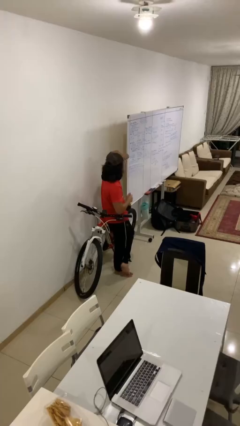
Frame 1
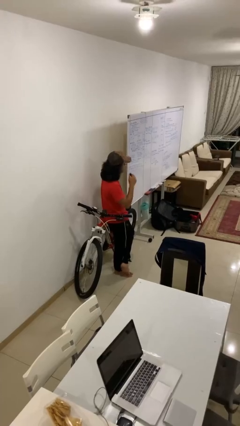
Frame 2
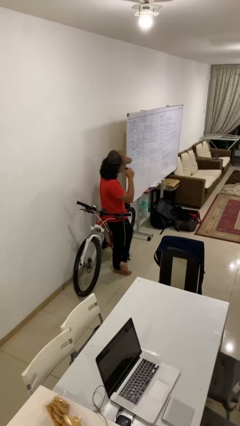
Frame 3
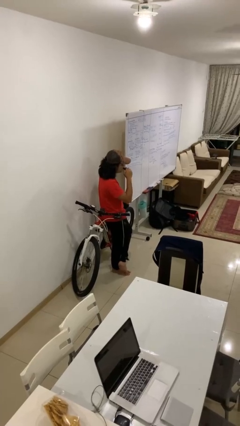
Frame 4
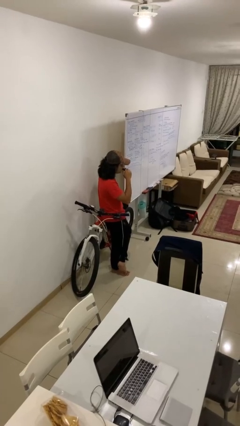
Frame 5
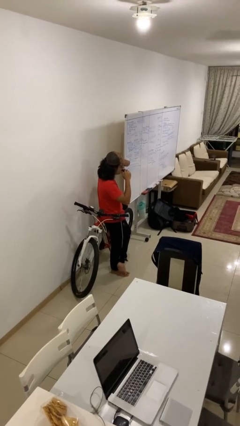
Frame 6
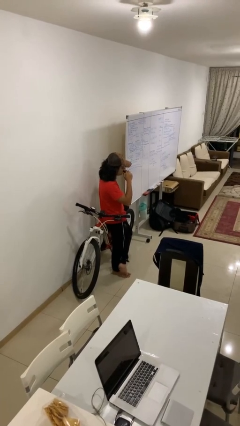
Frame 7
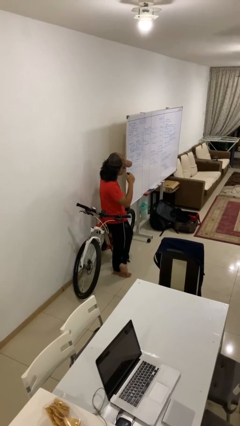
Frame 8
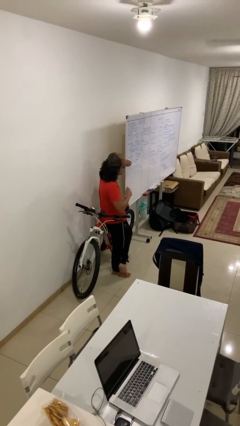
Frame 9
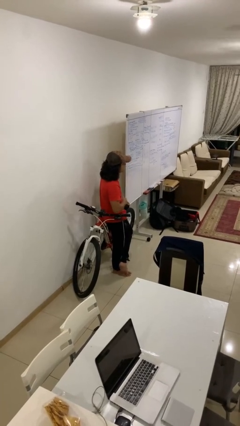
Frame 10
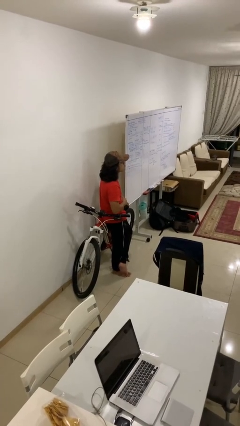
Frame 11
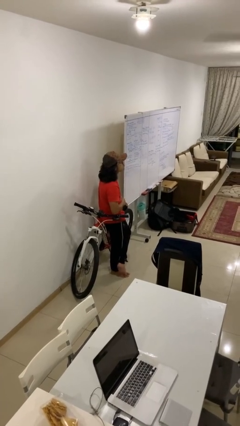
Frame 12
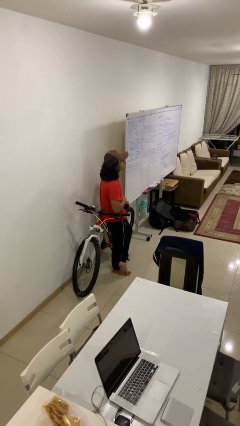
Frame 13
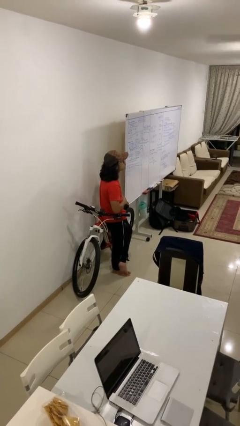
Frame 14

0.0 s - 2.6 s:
person vapes

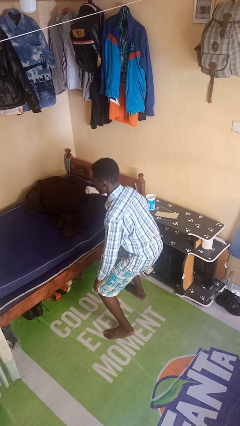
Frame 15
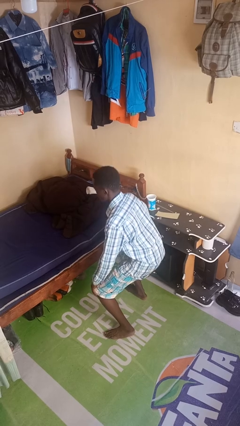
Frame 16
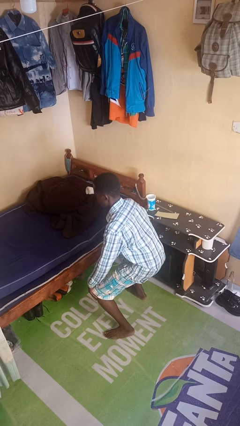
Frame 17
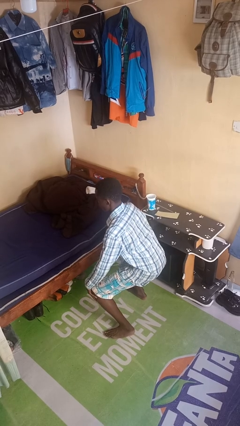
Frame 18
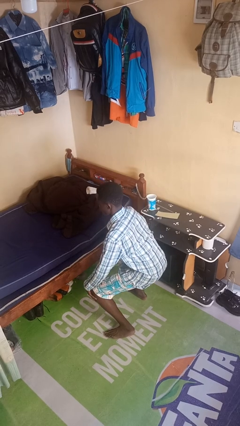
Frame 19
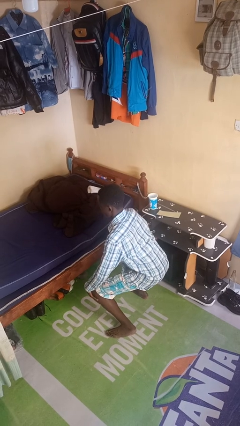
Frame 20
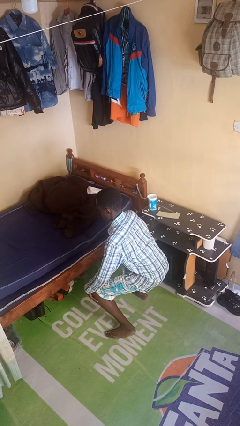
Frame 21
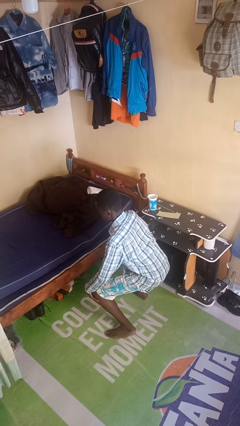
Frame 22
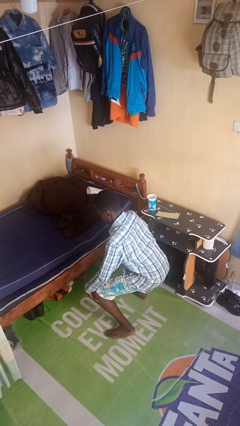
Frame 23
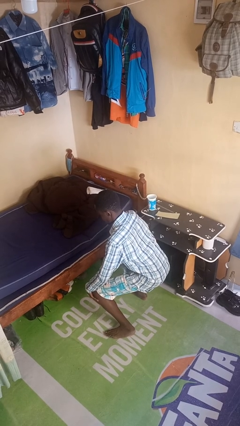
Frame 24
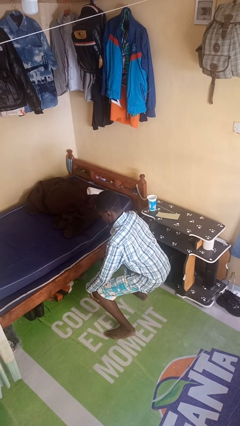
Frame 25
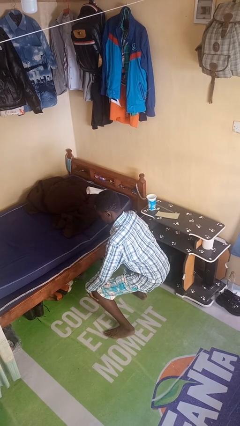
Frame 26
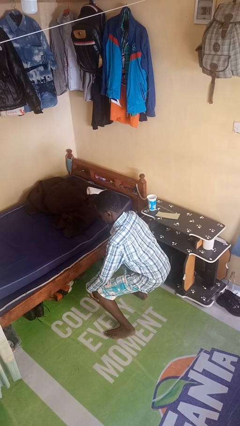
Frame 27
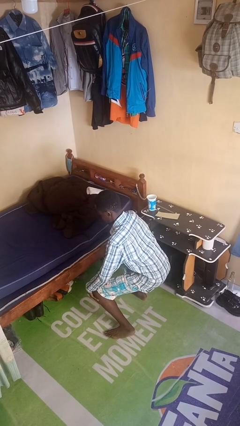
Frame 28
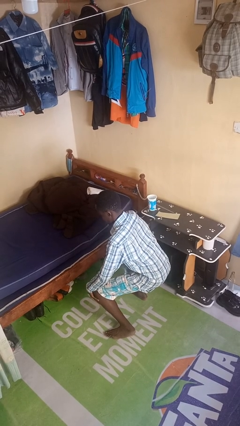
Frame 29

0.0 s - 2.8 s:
person squats

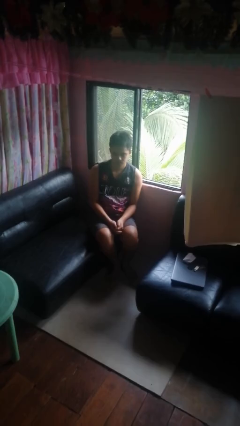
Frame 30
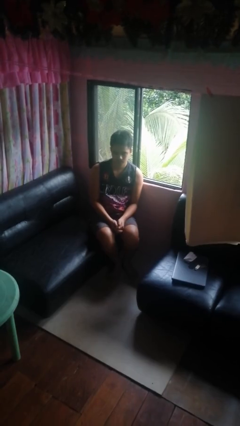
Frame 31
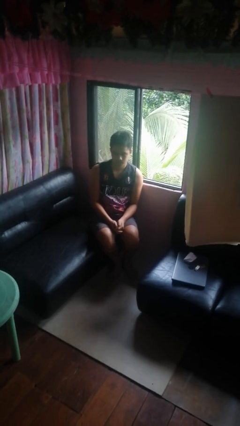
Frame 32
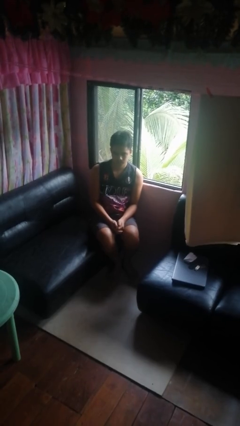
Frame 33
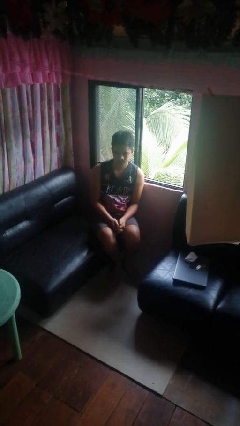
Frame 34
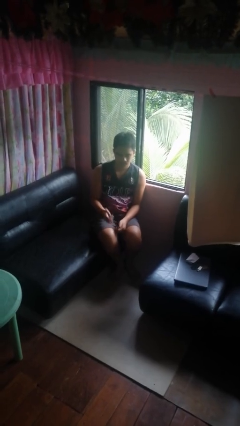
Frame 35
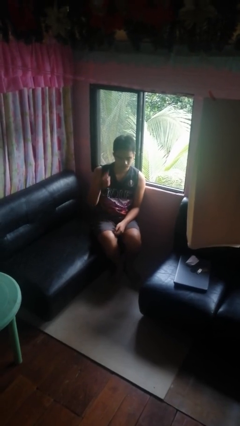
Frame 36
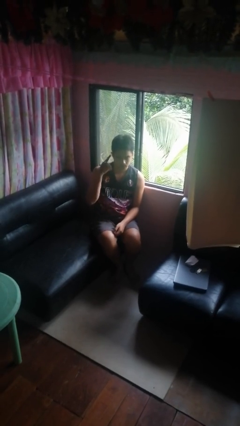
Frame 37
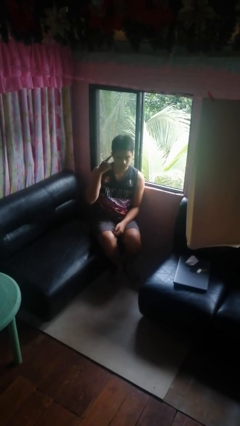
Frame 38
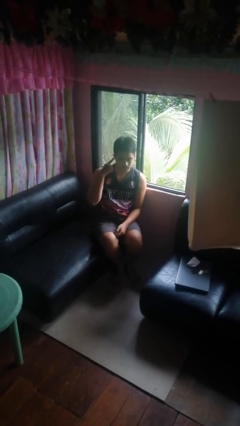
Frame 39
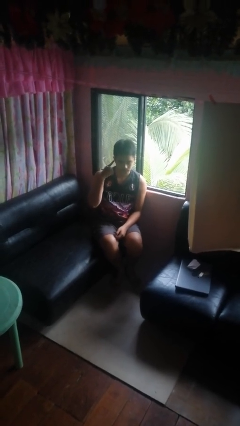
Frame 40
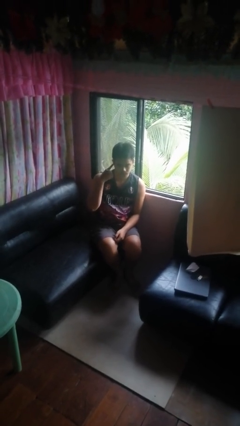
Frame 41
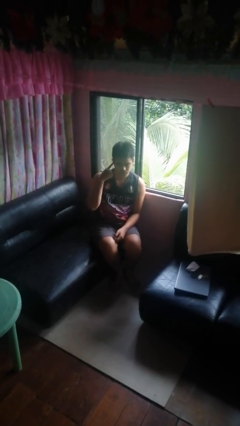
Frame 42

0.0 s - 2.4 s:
person gestures listen closely

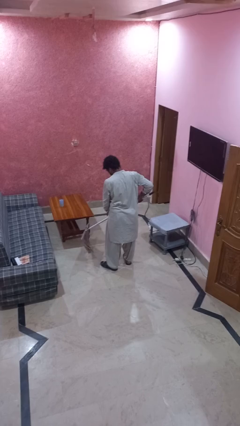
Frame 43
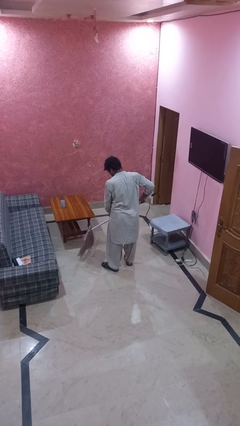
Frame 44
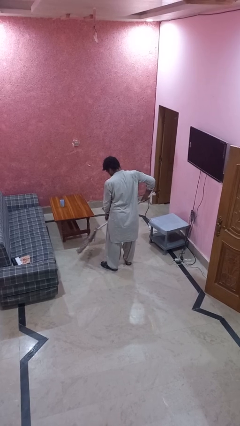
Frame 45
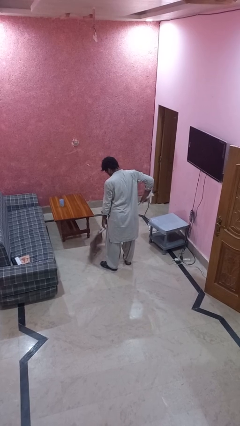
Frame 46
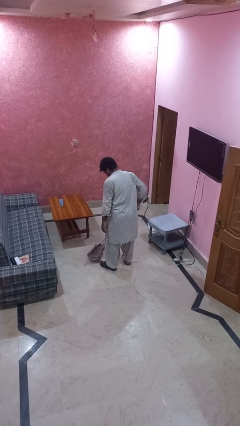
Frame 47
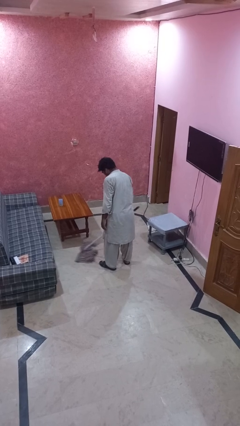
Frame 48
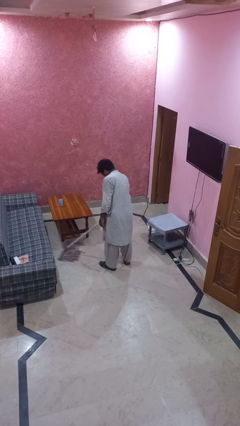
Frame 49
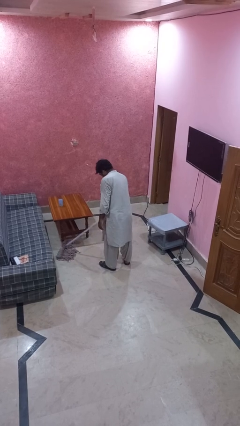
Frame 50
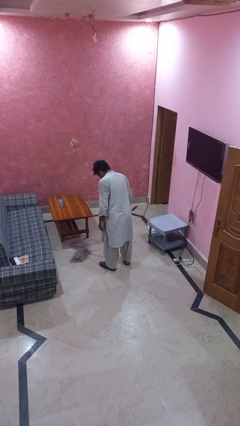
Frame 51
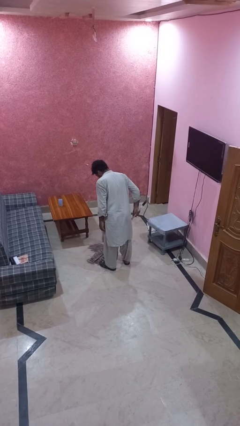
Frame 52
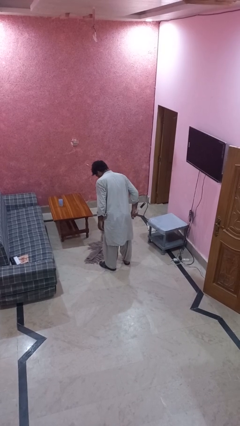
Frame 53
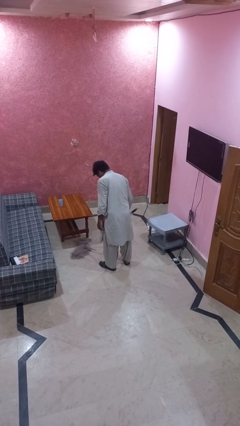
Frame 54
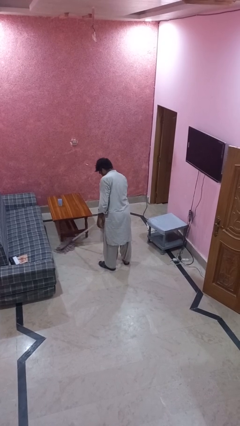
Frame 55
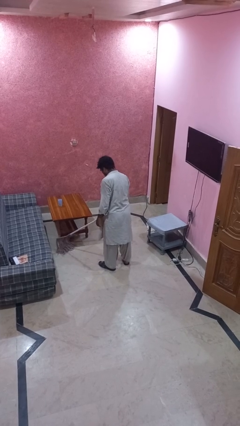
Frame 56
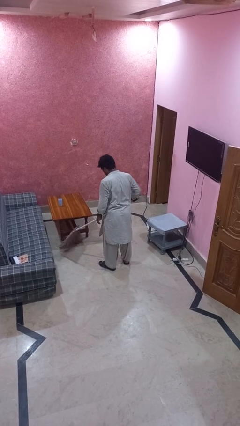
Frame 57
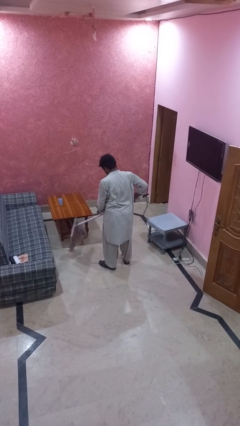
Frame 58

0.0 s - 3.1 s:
person mops

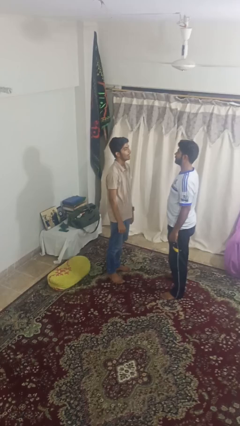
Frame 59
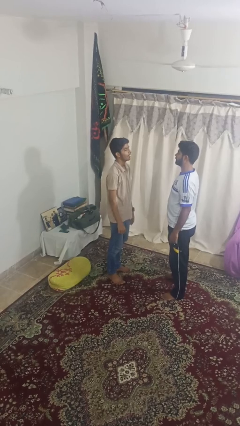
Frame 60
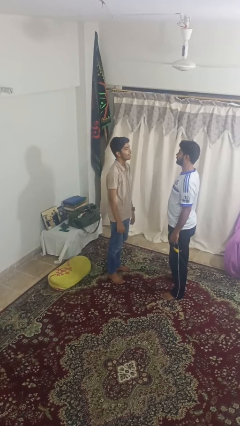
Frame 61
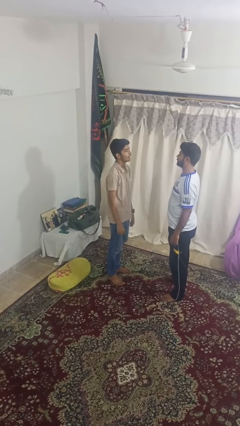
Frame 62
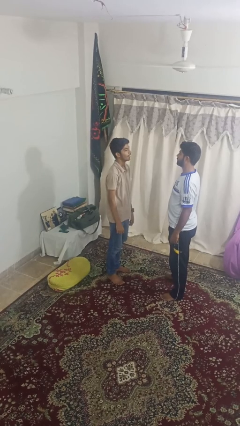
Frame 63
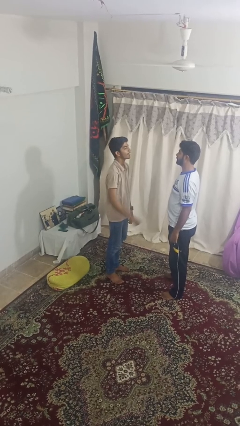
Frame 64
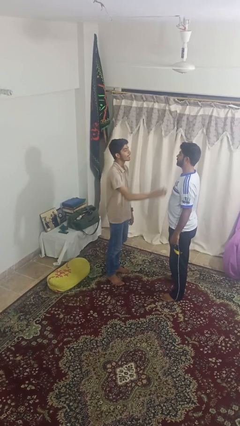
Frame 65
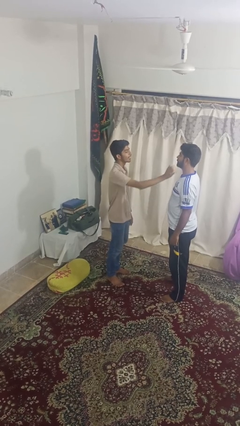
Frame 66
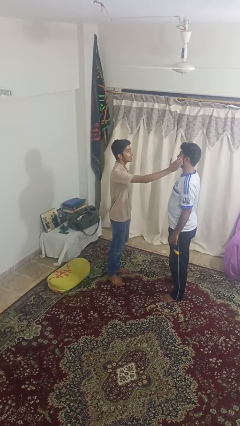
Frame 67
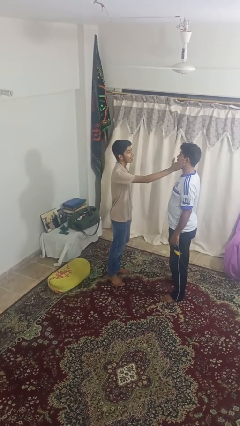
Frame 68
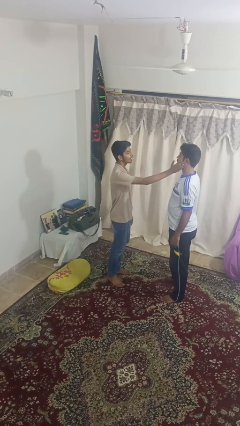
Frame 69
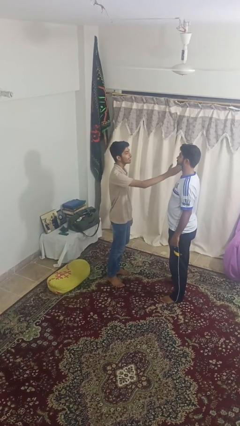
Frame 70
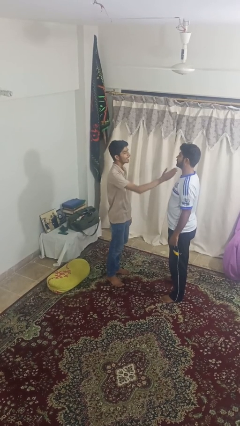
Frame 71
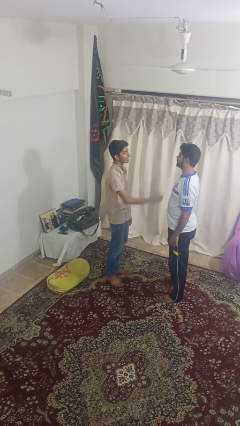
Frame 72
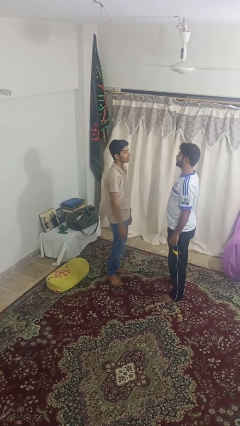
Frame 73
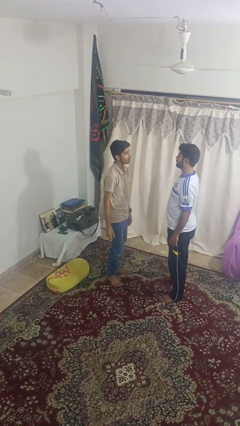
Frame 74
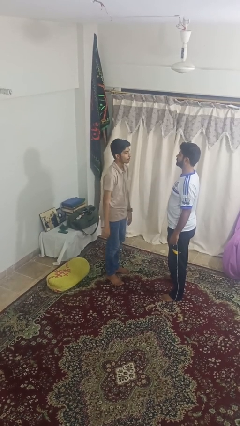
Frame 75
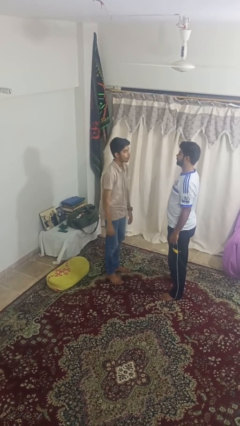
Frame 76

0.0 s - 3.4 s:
person touches face of person

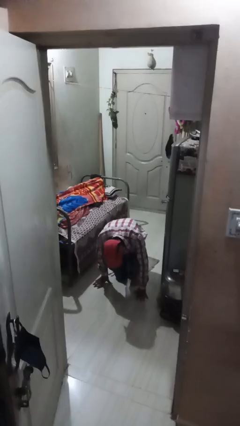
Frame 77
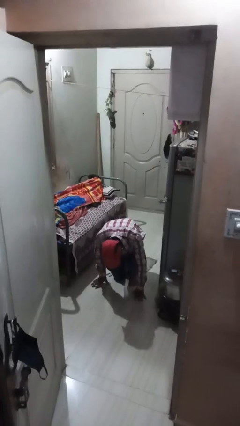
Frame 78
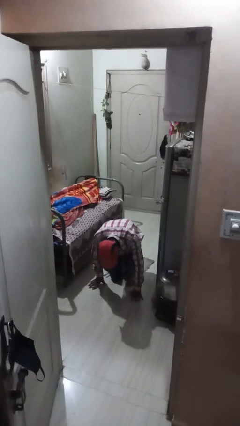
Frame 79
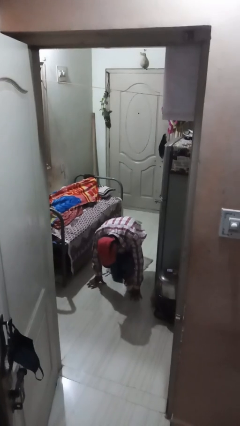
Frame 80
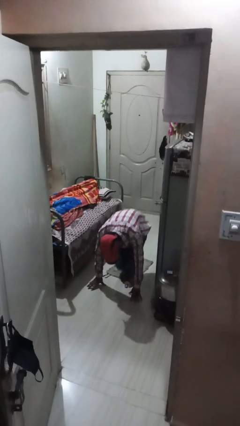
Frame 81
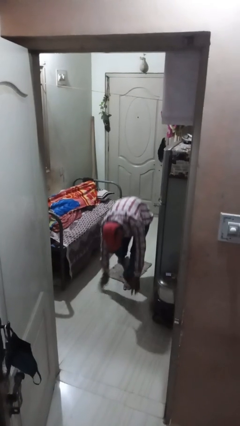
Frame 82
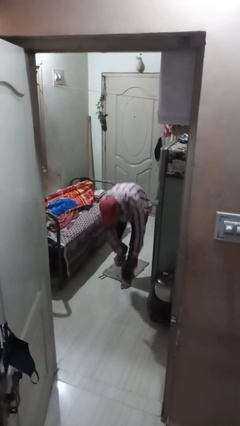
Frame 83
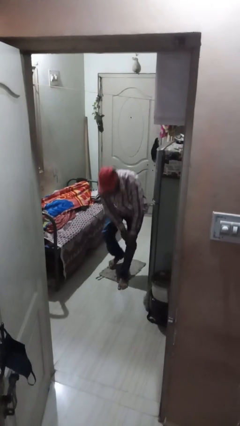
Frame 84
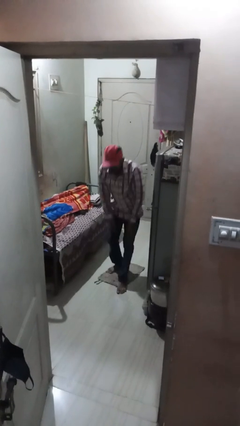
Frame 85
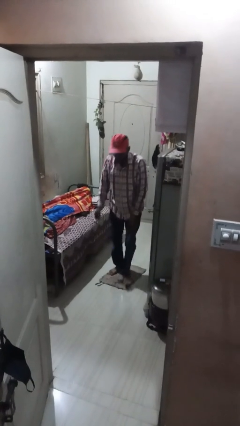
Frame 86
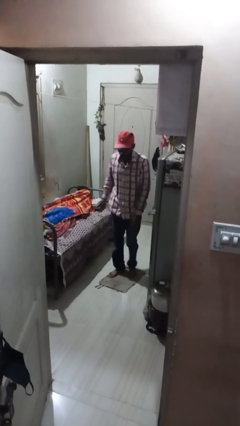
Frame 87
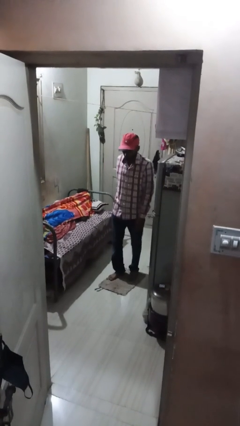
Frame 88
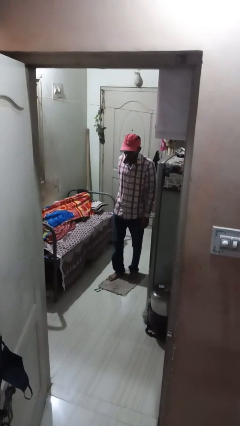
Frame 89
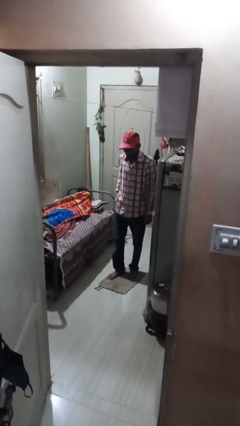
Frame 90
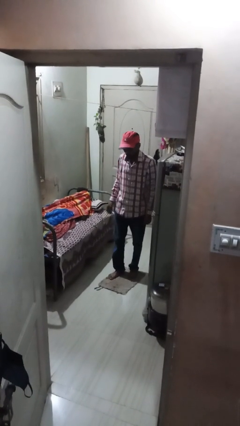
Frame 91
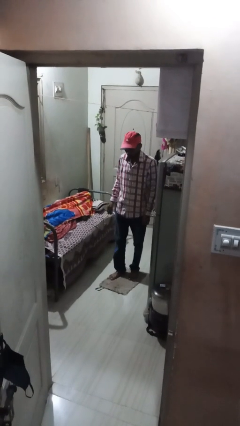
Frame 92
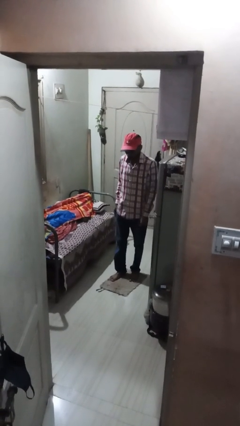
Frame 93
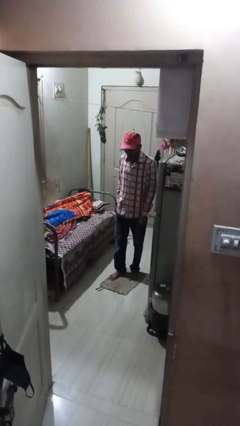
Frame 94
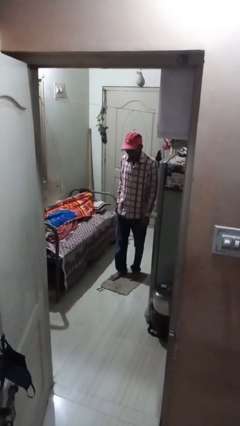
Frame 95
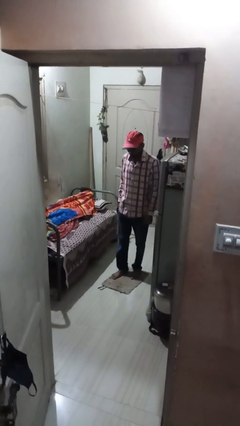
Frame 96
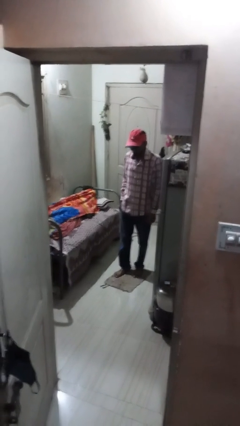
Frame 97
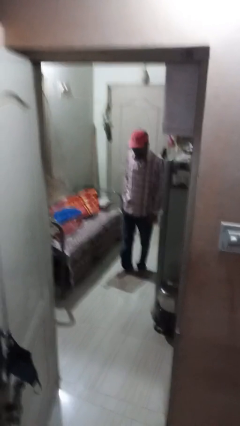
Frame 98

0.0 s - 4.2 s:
person stands up from floor
